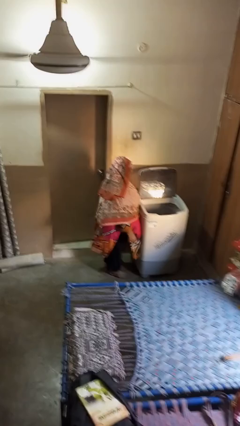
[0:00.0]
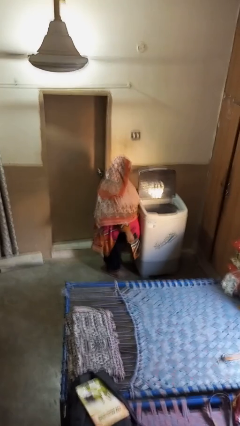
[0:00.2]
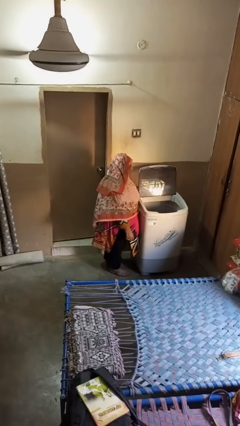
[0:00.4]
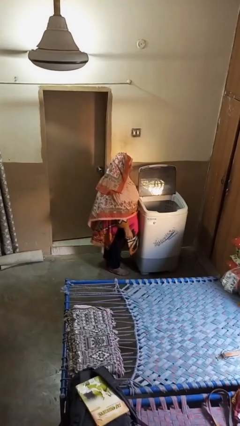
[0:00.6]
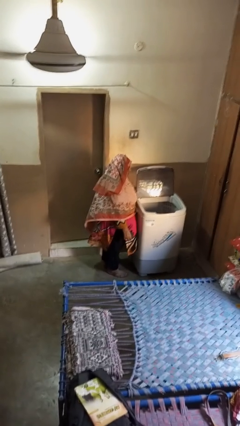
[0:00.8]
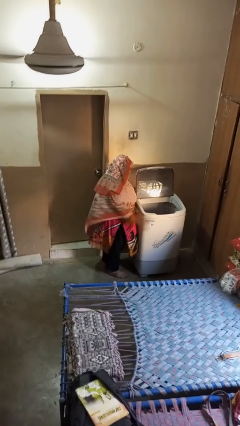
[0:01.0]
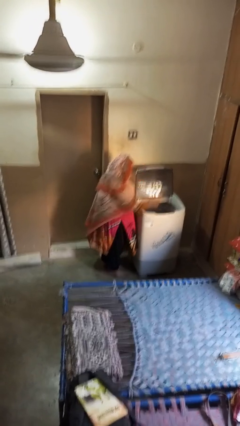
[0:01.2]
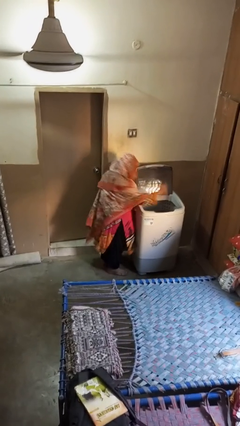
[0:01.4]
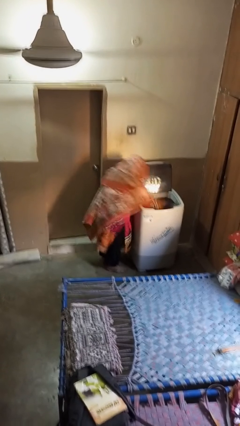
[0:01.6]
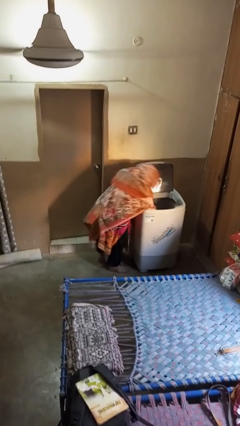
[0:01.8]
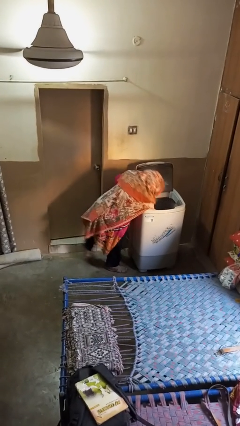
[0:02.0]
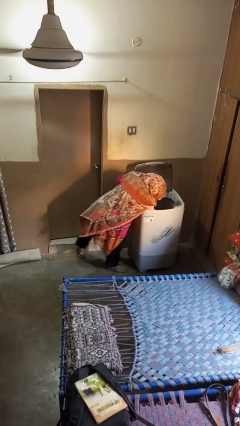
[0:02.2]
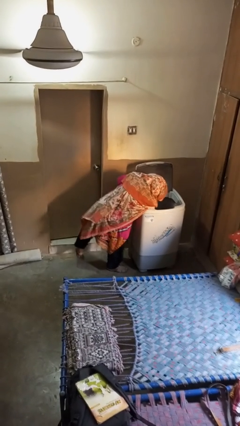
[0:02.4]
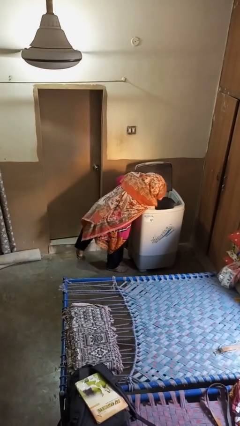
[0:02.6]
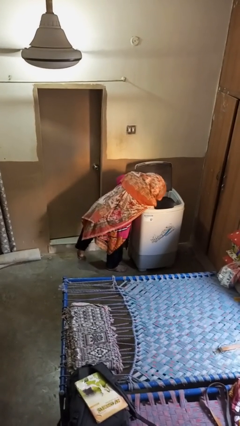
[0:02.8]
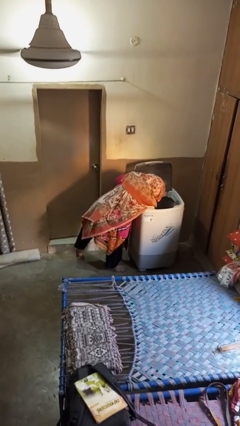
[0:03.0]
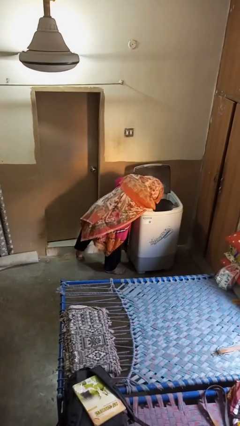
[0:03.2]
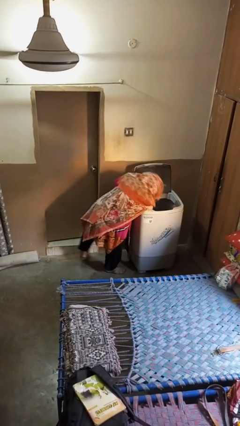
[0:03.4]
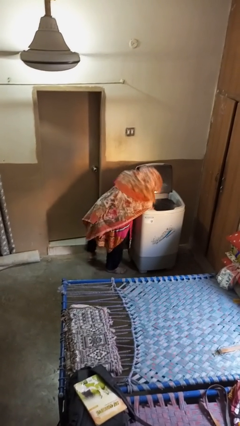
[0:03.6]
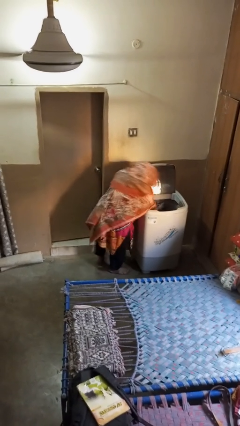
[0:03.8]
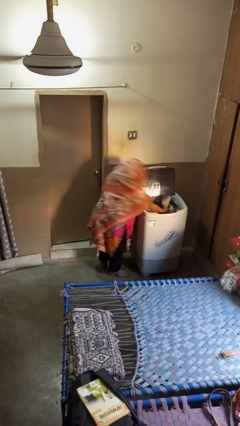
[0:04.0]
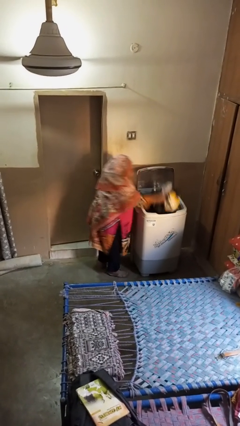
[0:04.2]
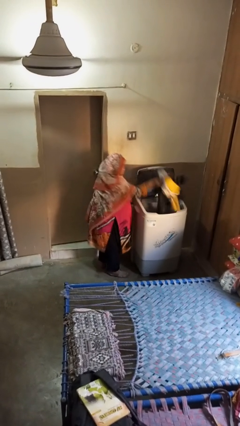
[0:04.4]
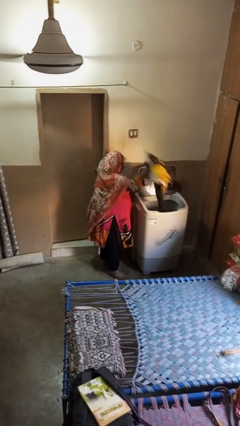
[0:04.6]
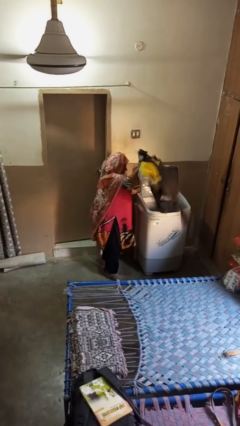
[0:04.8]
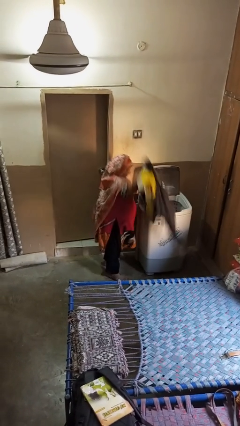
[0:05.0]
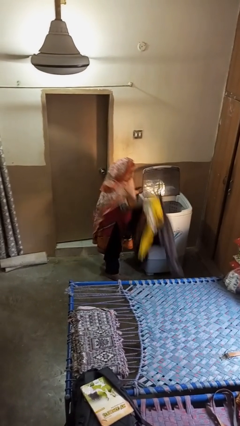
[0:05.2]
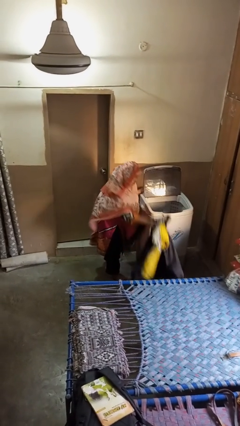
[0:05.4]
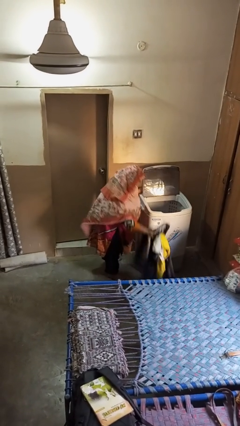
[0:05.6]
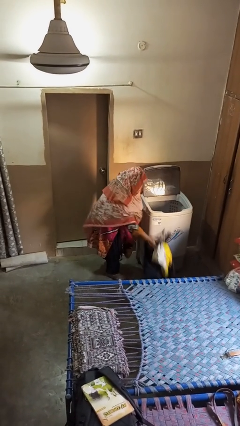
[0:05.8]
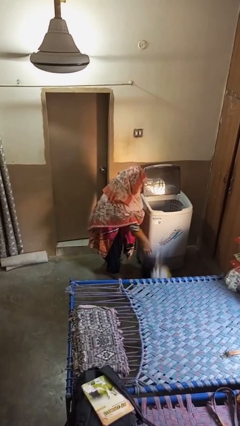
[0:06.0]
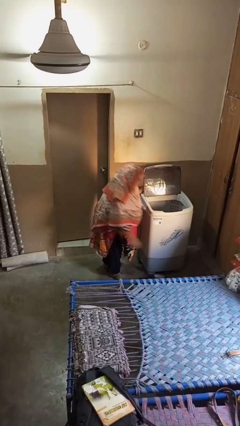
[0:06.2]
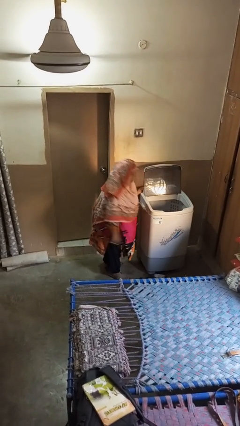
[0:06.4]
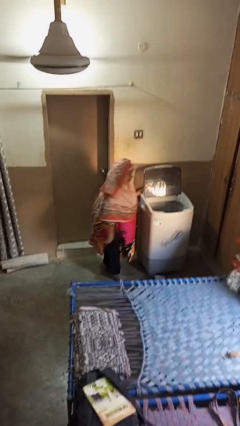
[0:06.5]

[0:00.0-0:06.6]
person unloads clotheswasher

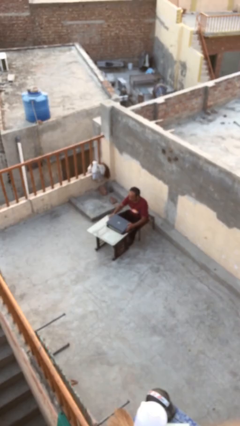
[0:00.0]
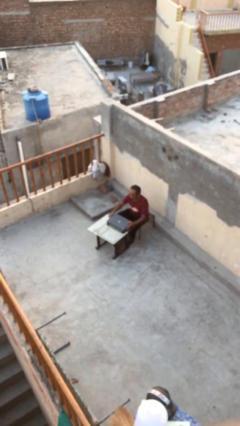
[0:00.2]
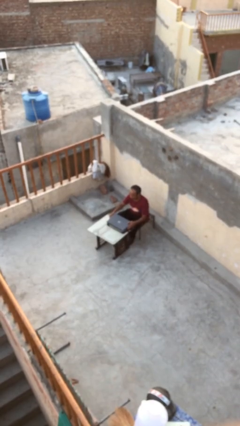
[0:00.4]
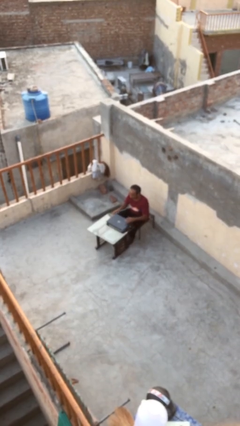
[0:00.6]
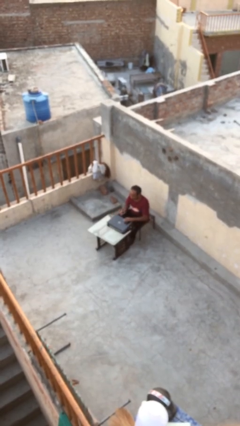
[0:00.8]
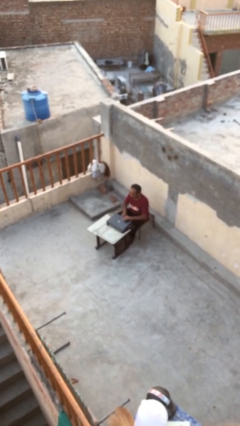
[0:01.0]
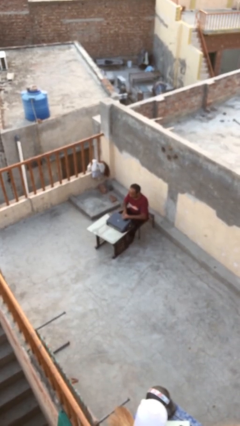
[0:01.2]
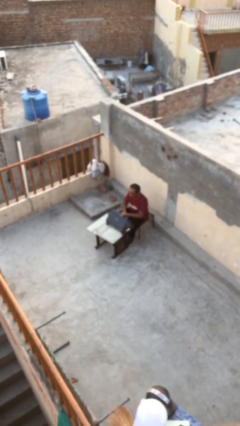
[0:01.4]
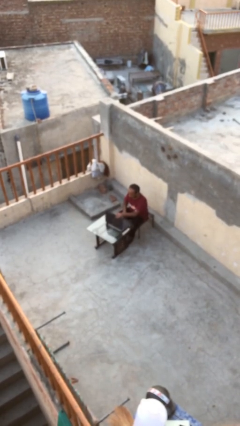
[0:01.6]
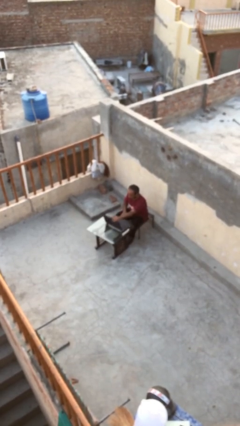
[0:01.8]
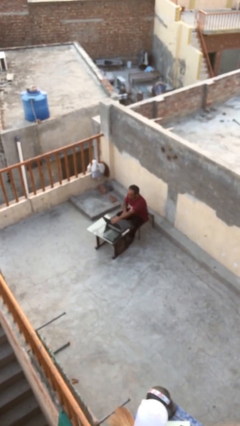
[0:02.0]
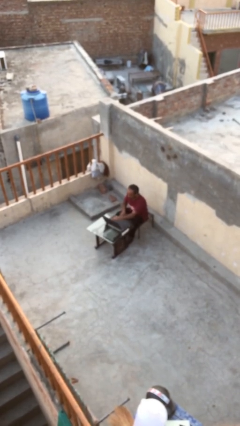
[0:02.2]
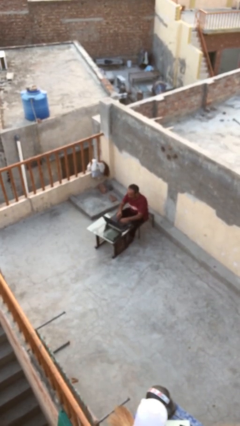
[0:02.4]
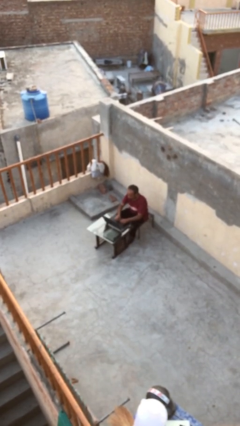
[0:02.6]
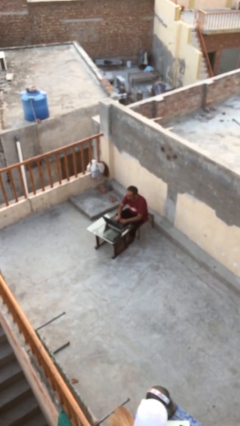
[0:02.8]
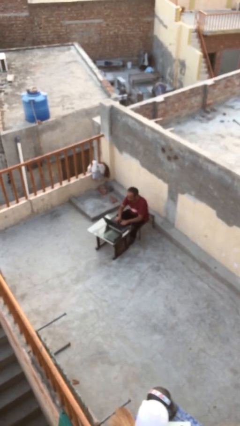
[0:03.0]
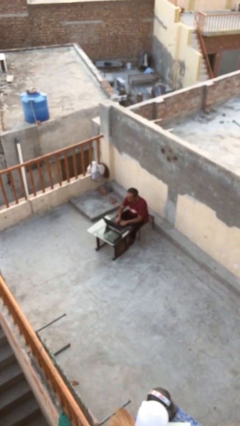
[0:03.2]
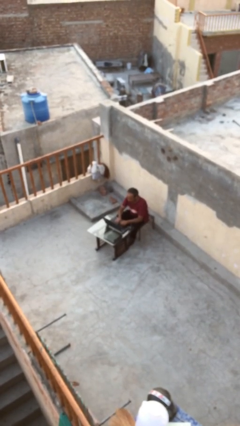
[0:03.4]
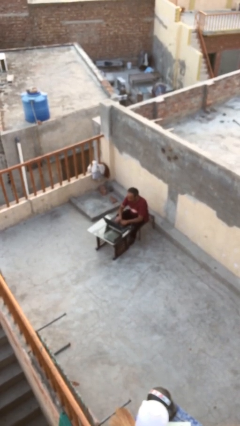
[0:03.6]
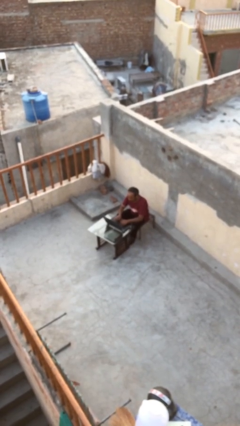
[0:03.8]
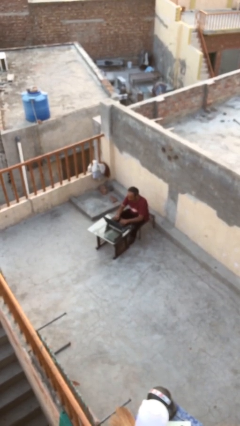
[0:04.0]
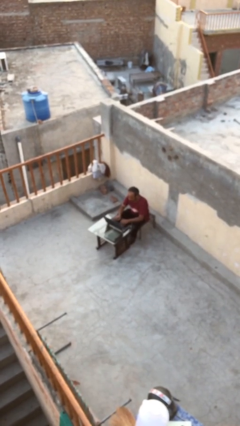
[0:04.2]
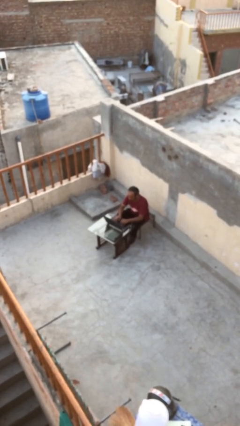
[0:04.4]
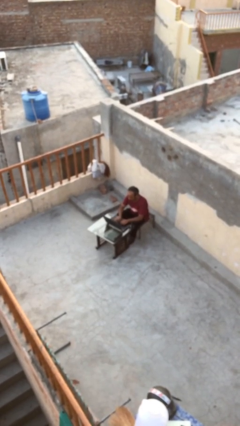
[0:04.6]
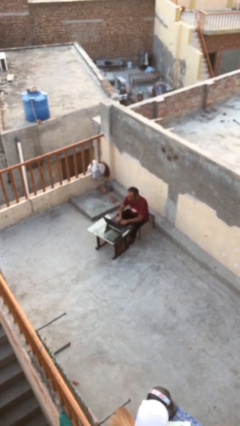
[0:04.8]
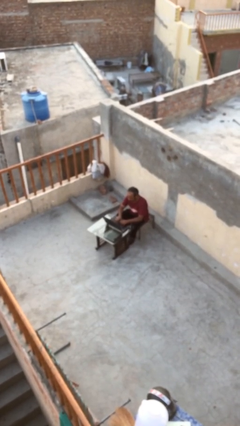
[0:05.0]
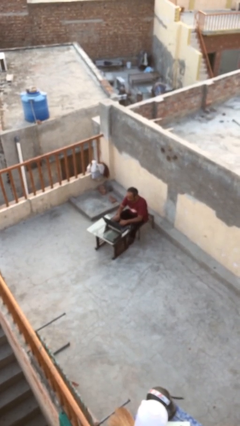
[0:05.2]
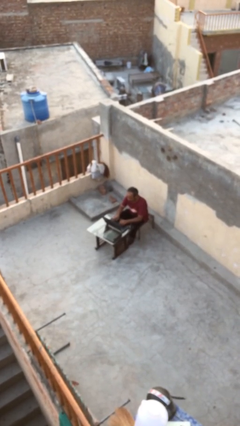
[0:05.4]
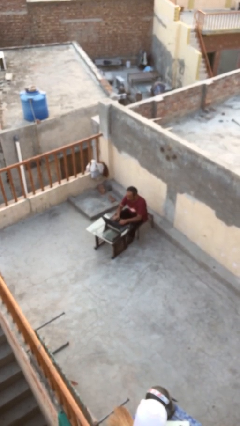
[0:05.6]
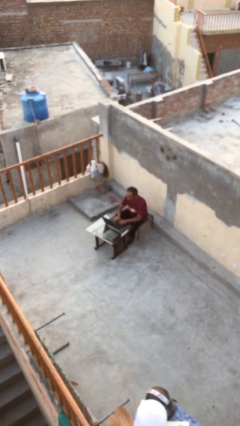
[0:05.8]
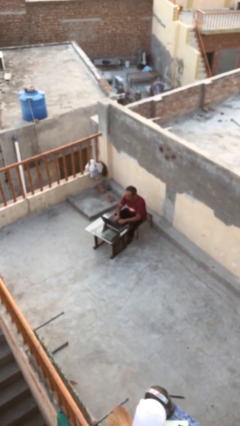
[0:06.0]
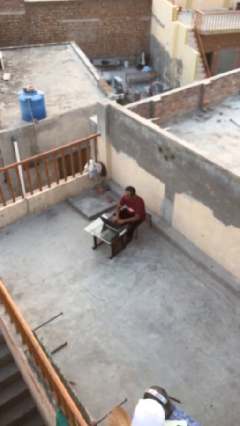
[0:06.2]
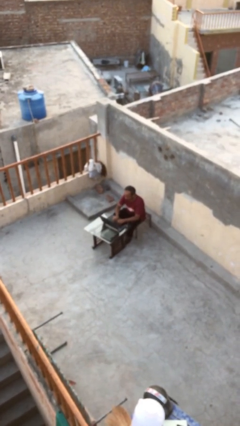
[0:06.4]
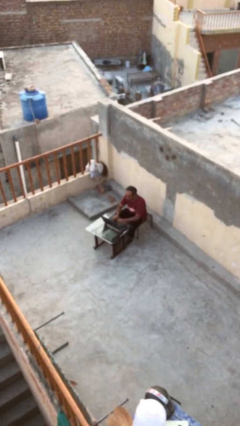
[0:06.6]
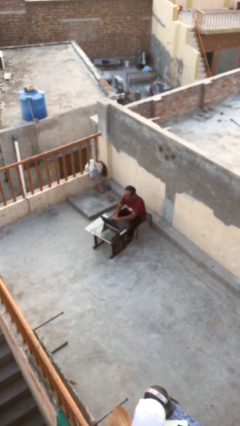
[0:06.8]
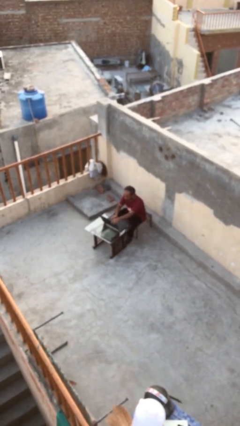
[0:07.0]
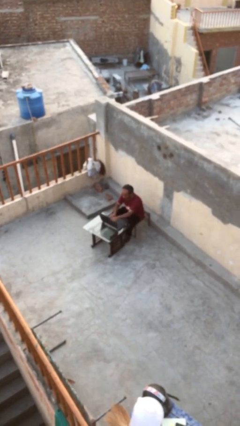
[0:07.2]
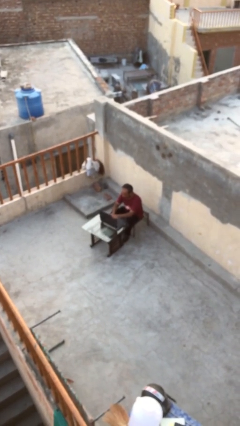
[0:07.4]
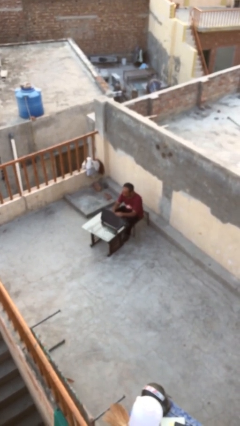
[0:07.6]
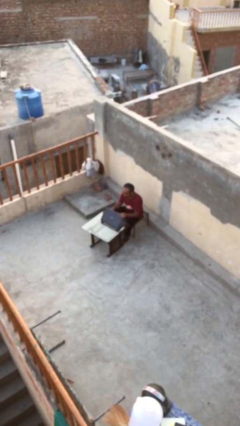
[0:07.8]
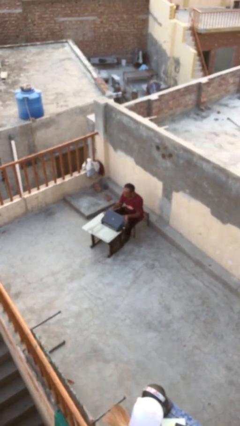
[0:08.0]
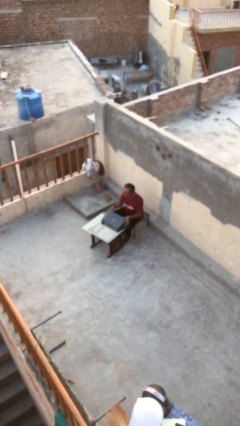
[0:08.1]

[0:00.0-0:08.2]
person interacts with laptop

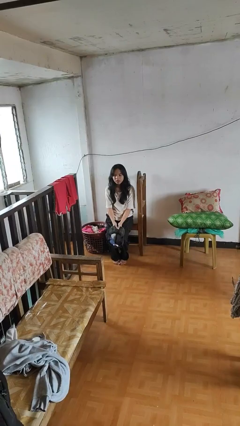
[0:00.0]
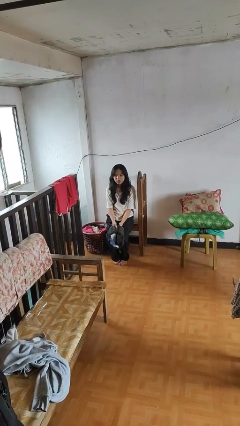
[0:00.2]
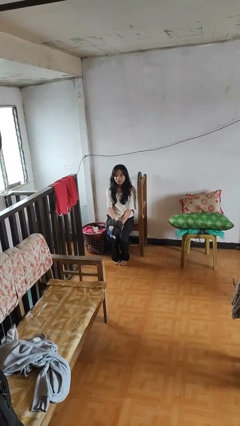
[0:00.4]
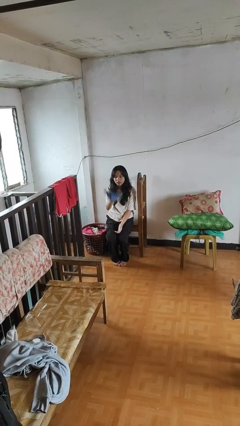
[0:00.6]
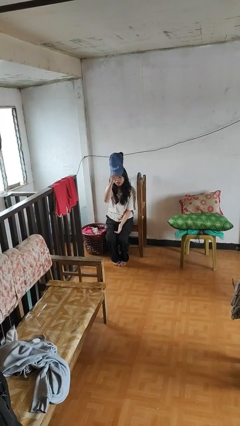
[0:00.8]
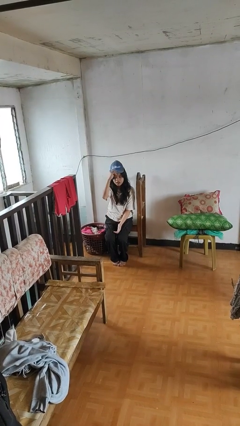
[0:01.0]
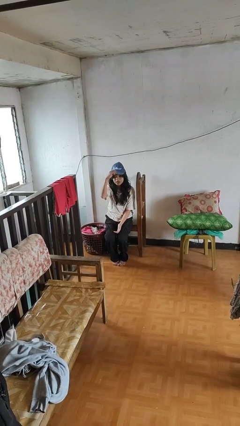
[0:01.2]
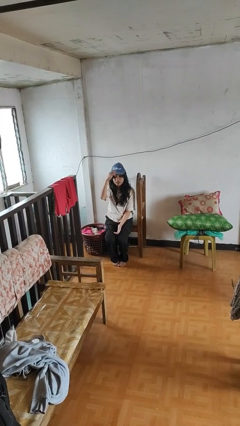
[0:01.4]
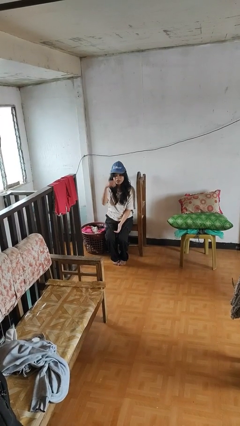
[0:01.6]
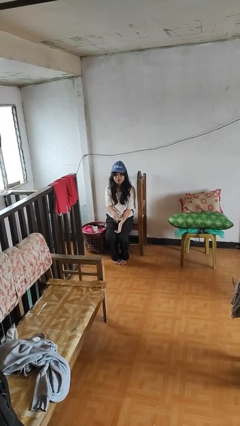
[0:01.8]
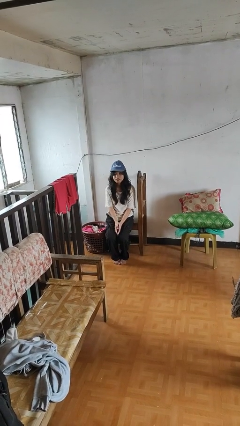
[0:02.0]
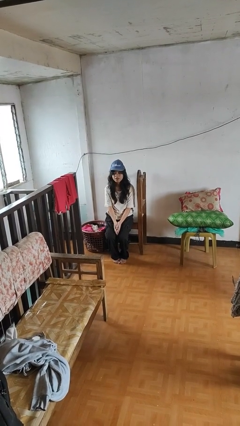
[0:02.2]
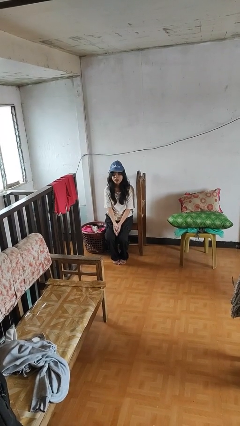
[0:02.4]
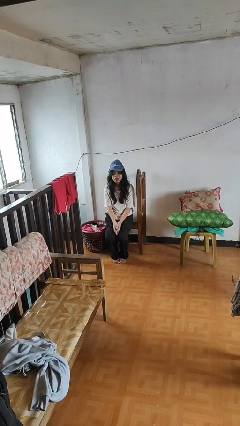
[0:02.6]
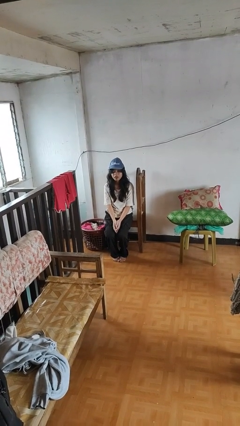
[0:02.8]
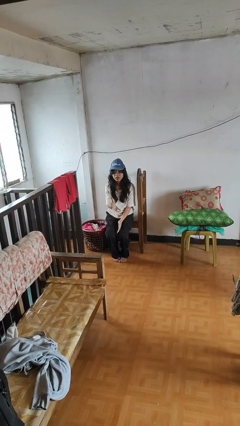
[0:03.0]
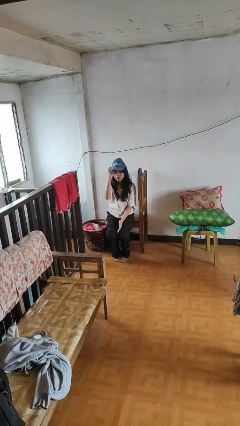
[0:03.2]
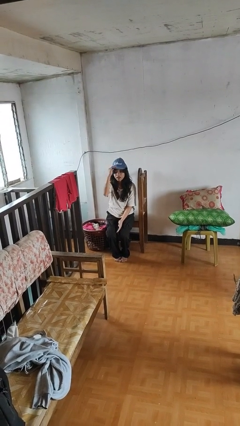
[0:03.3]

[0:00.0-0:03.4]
person puts on hat
